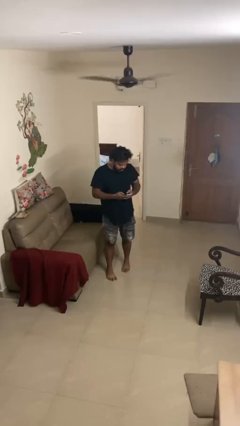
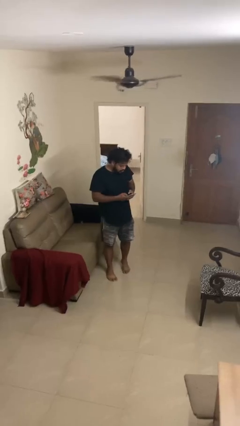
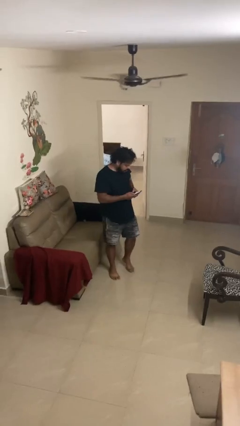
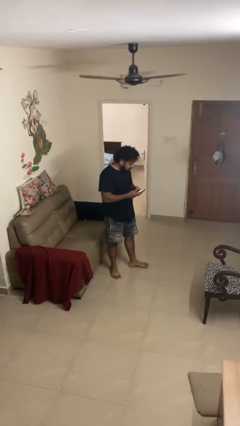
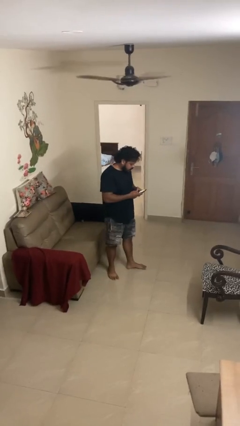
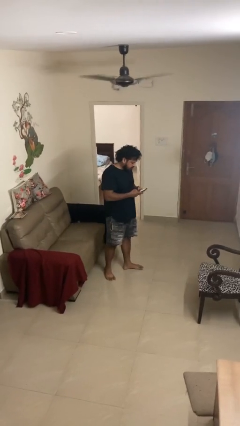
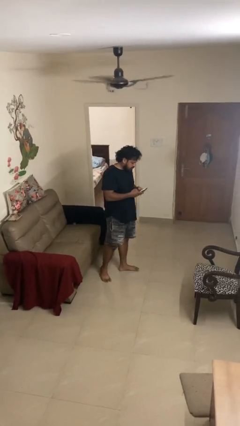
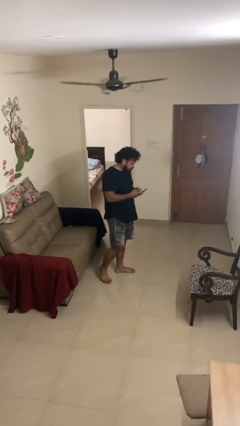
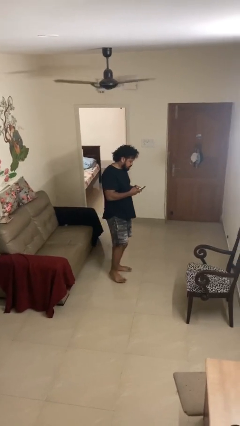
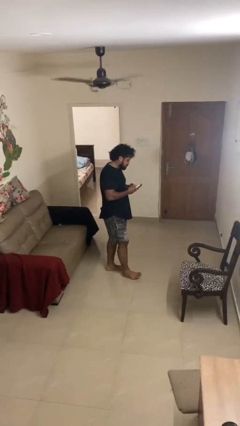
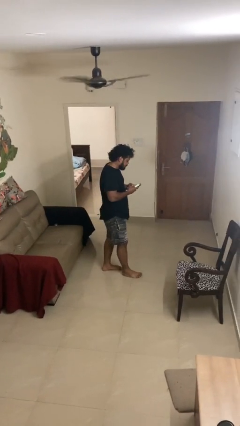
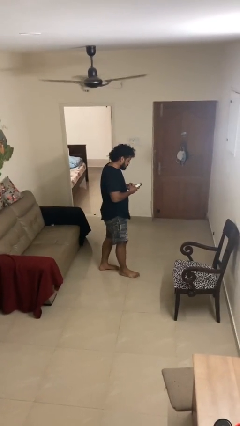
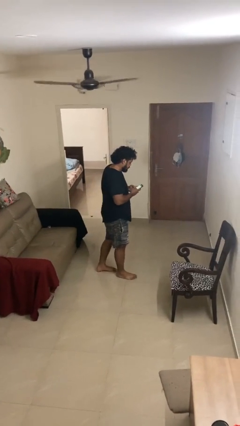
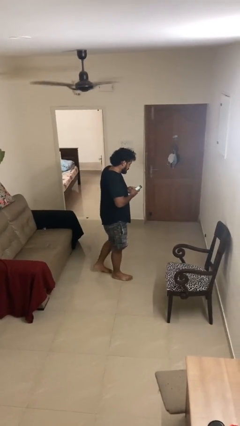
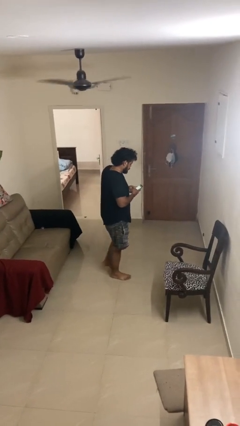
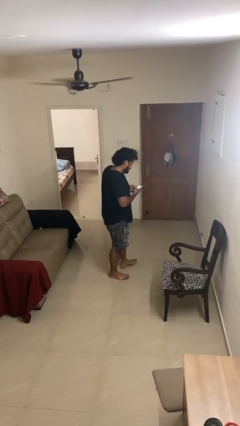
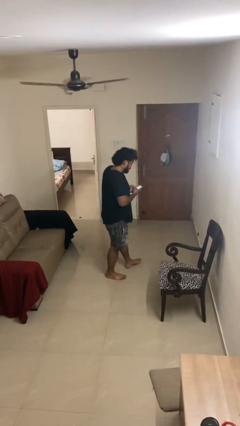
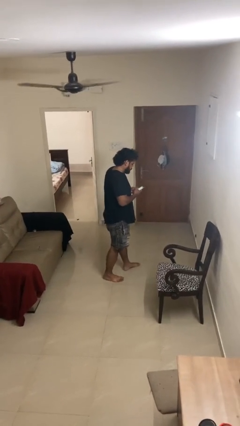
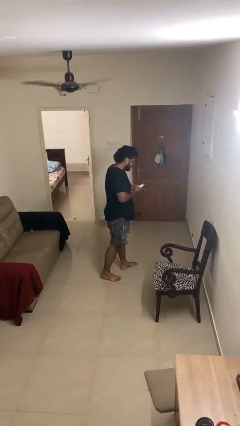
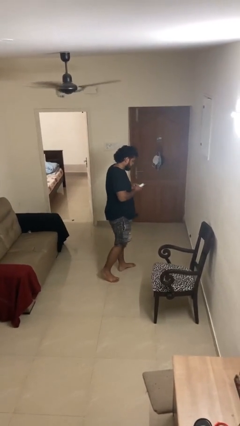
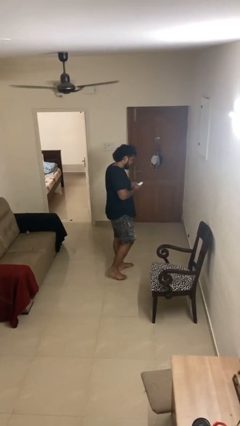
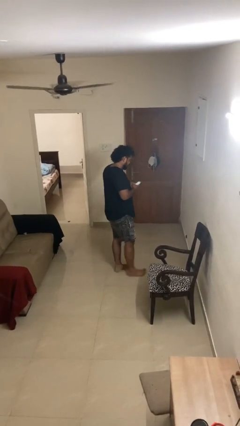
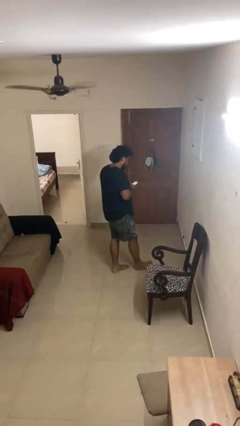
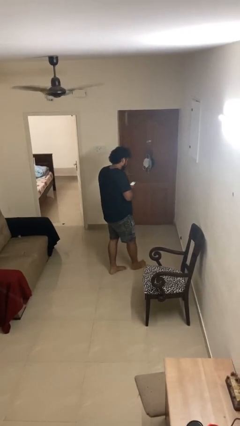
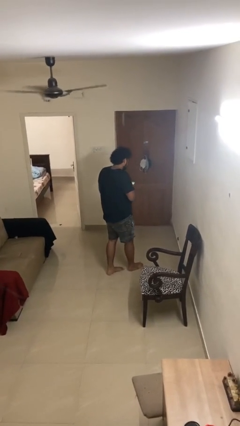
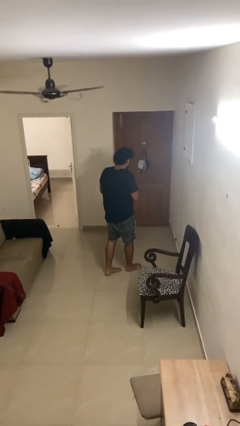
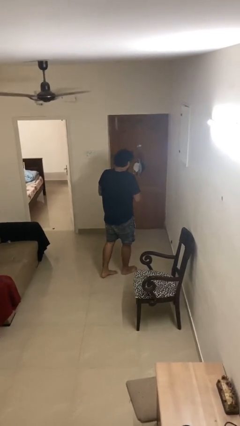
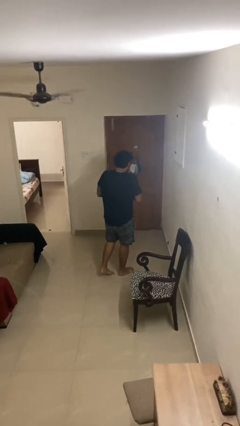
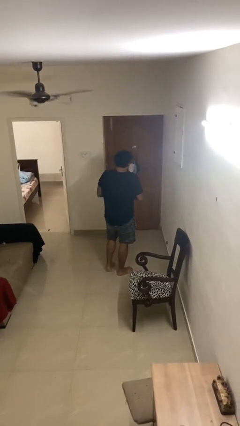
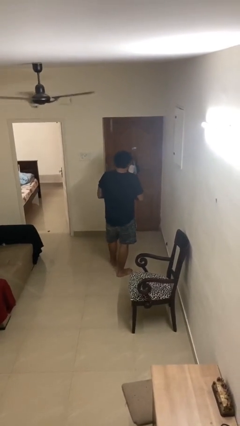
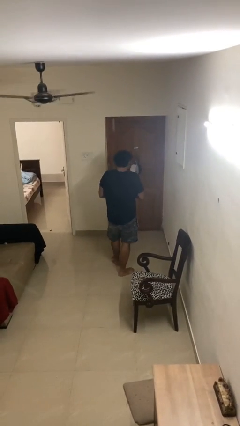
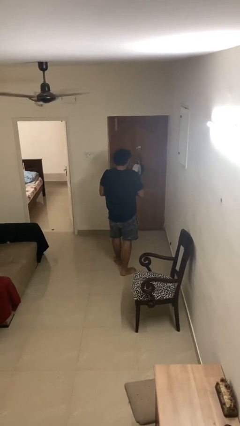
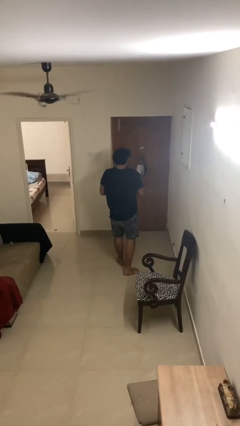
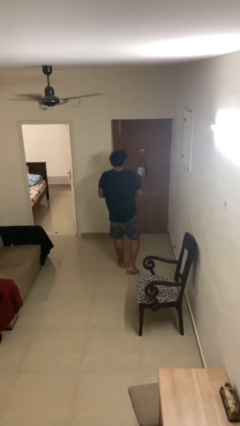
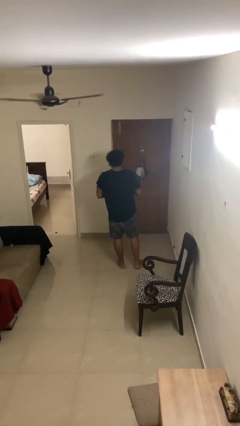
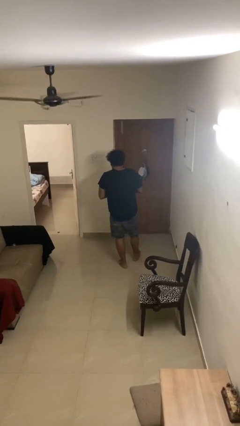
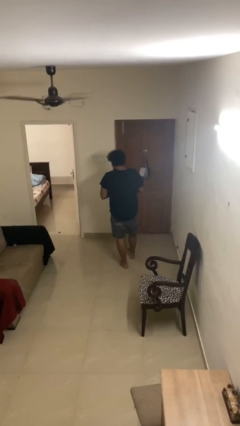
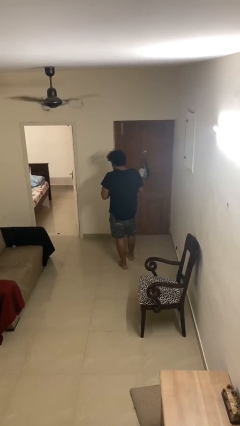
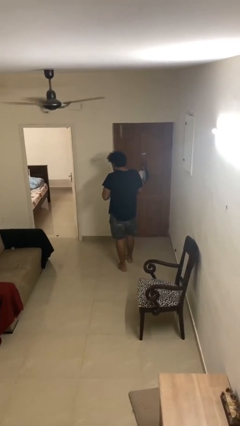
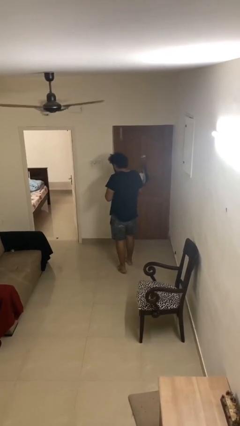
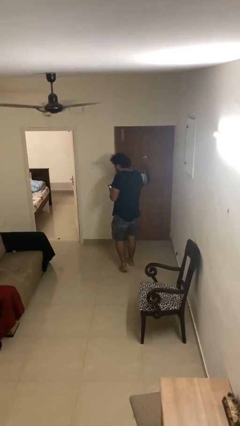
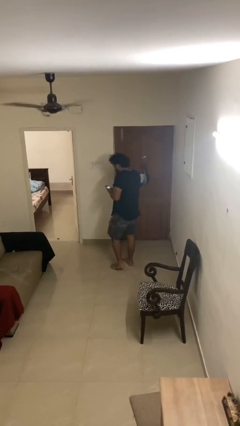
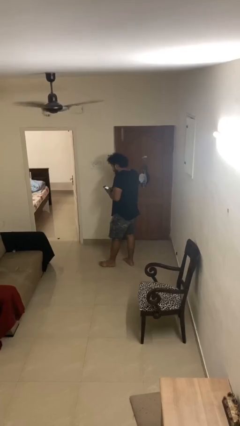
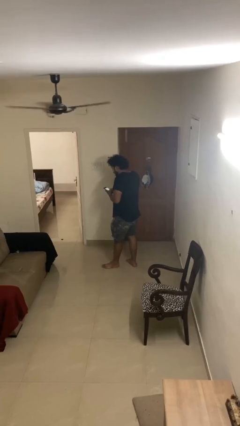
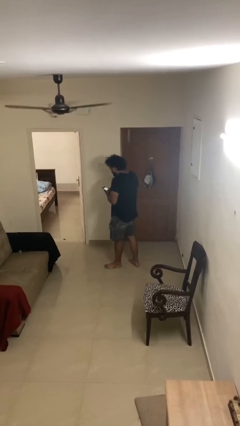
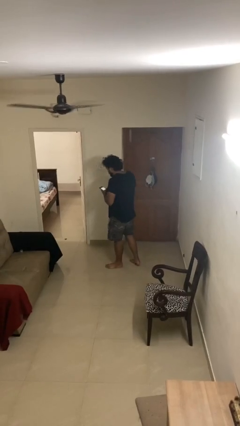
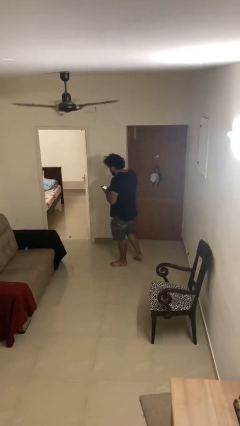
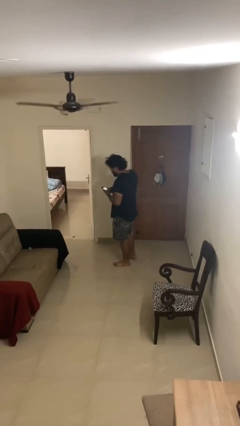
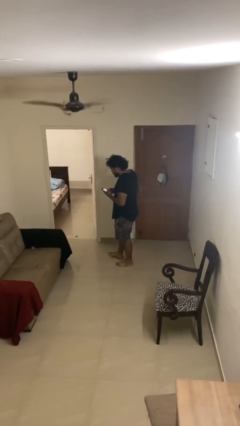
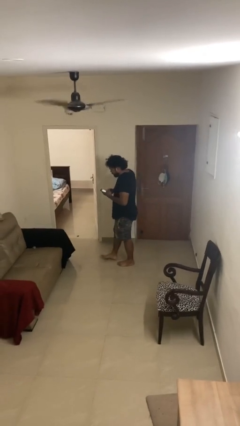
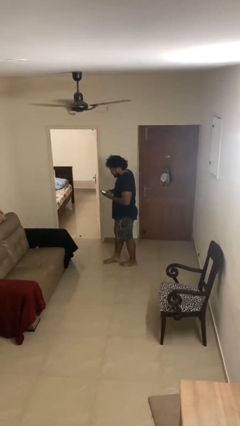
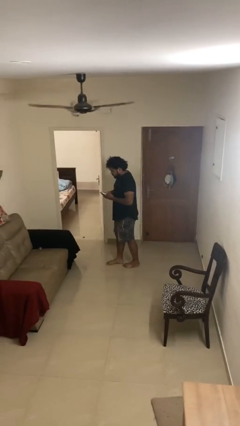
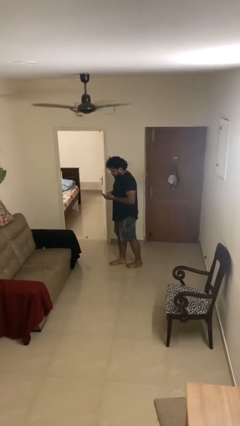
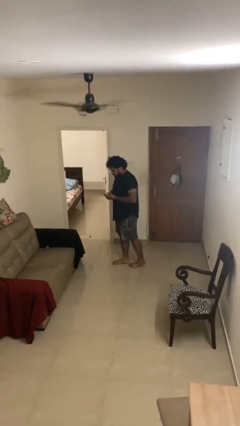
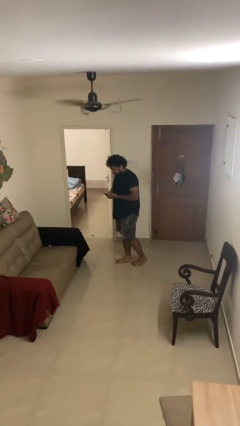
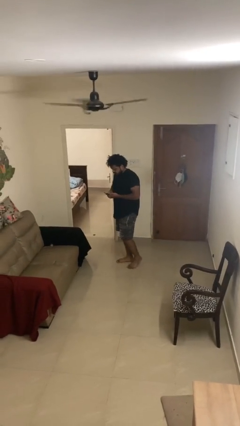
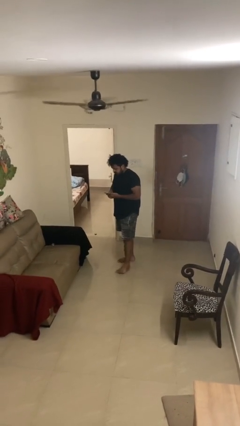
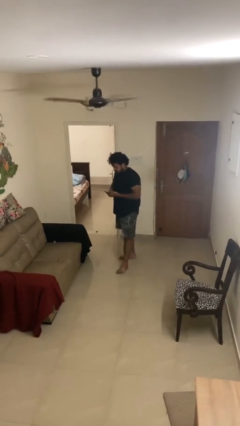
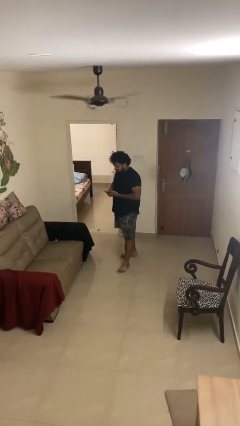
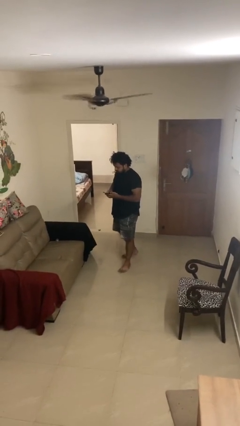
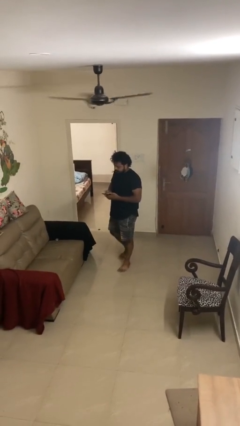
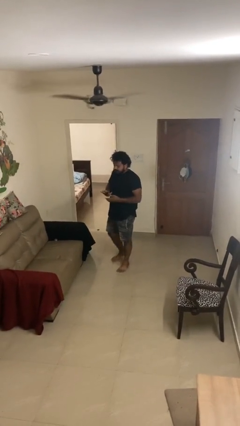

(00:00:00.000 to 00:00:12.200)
person texts on phone

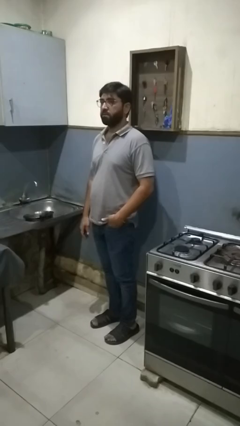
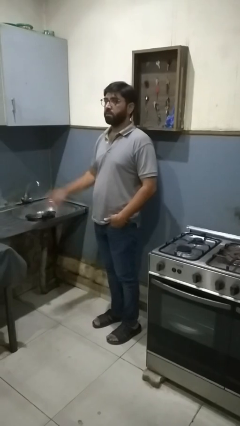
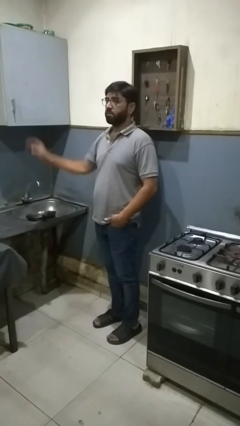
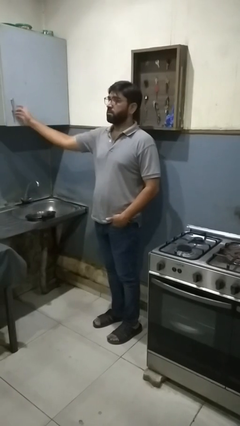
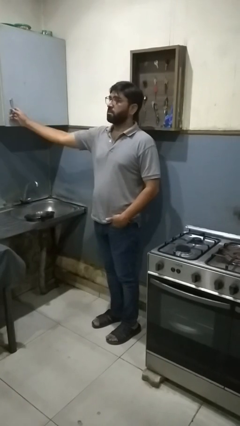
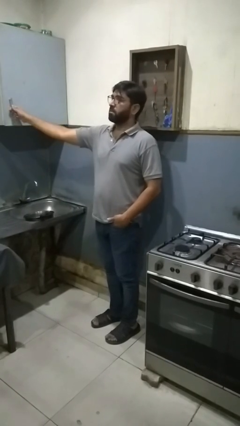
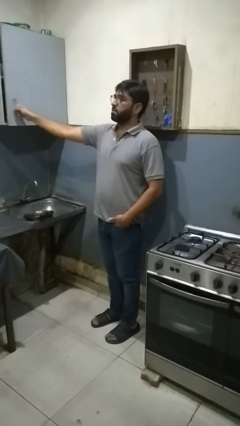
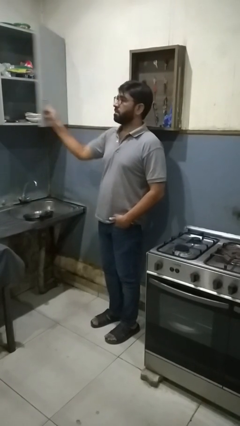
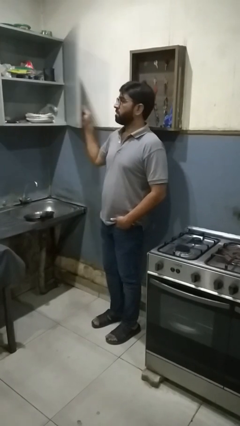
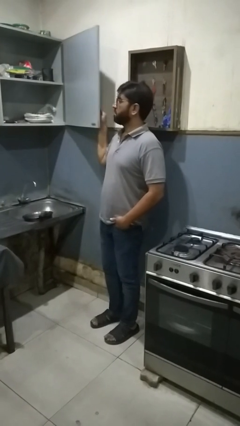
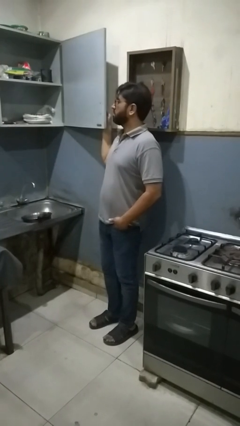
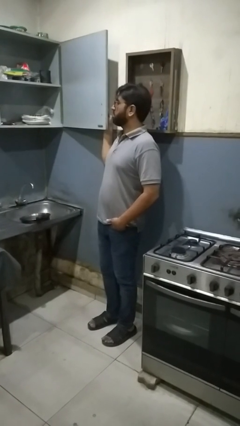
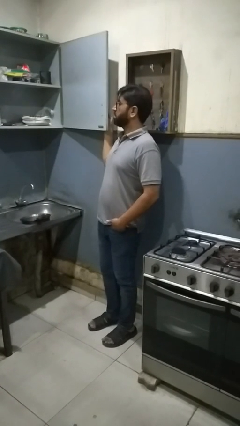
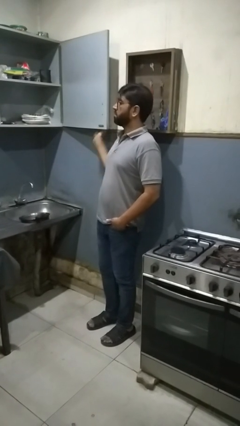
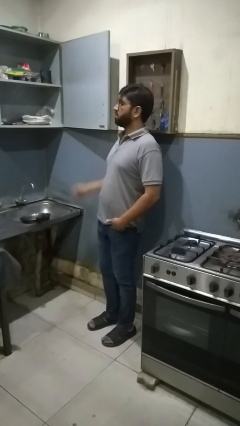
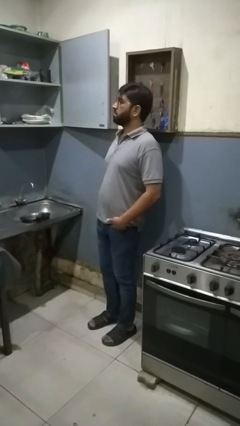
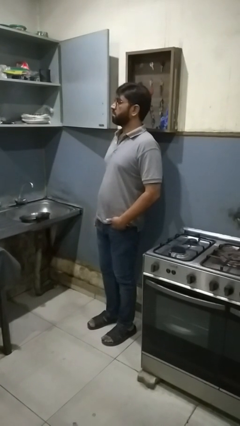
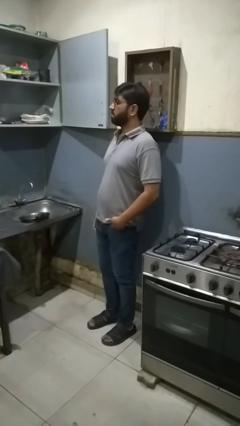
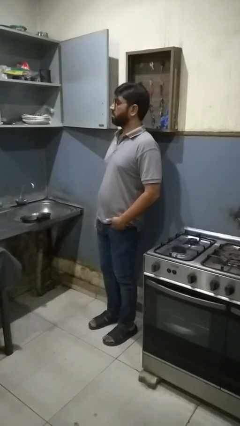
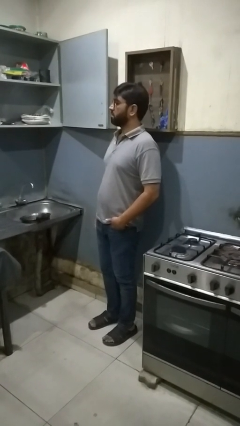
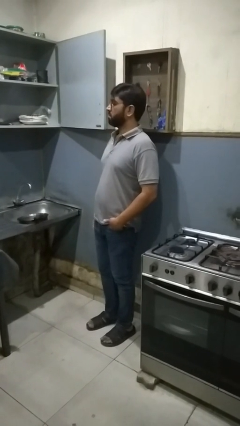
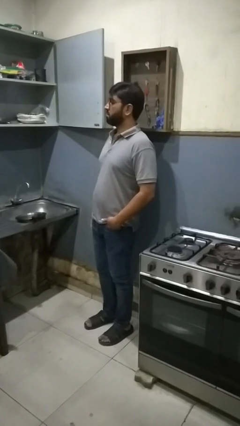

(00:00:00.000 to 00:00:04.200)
person opens kitchen drawer

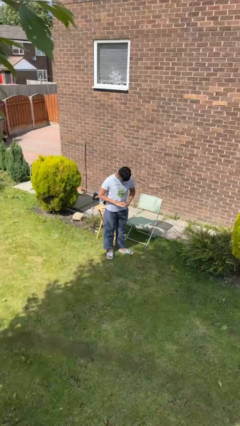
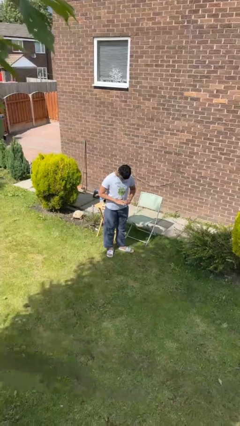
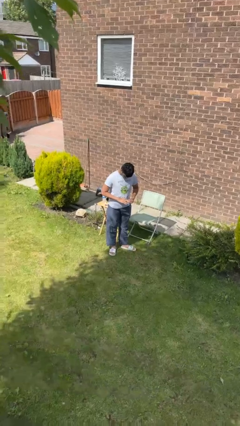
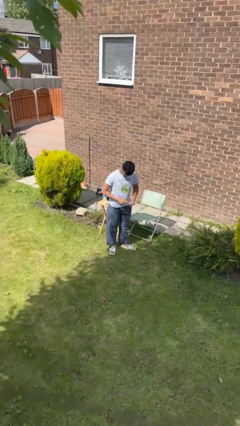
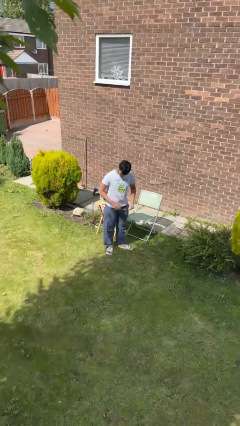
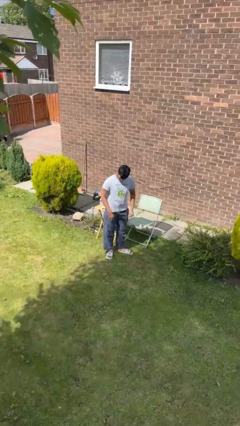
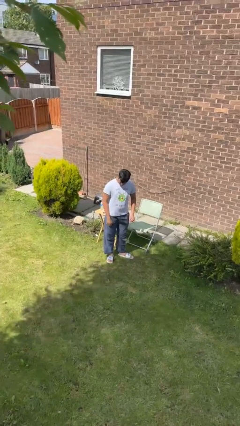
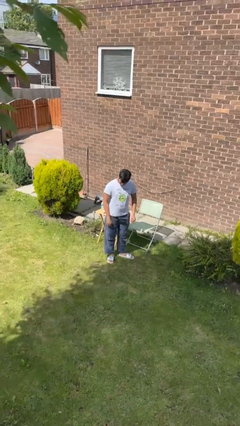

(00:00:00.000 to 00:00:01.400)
person takes off ring

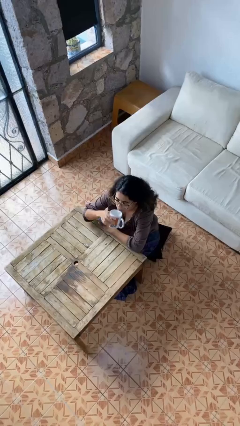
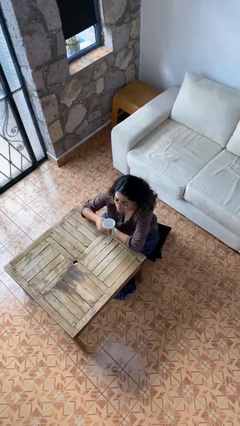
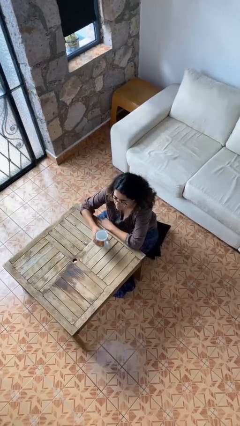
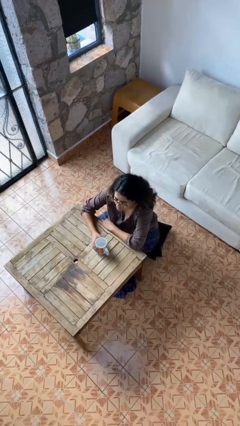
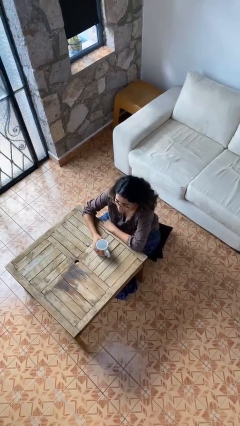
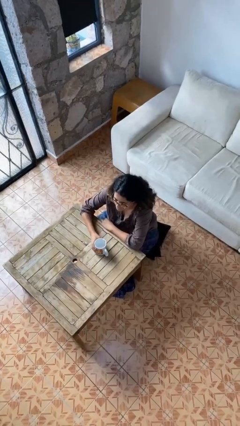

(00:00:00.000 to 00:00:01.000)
person puts down object on table
